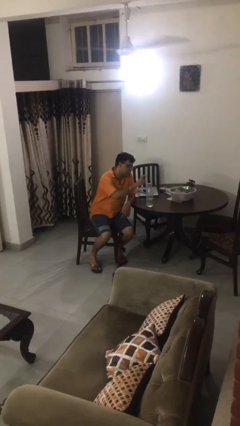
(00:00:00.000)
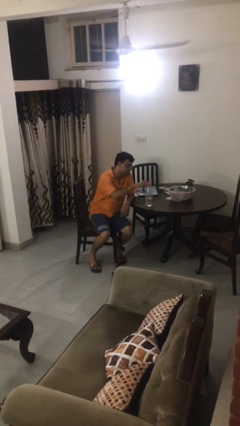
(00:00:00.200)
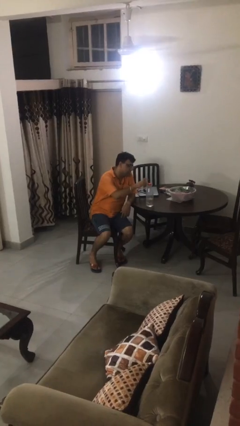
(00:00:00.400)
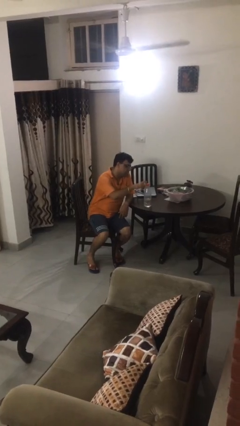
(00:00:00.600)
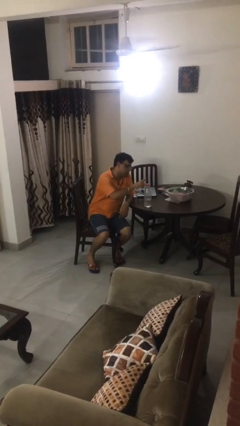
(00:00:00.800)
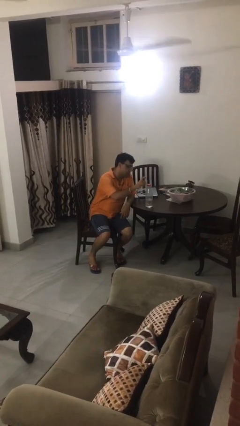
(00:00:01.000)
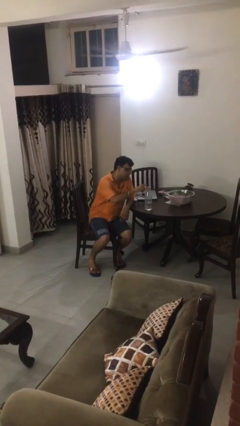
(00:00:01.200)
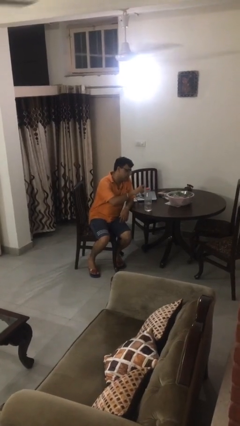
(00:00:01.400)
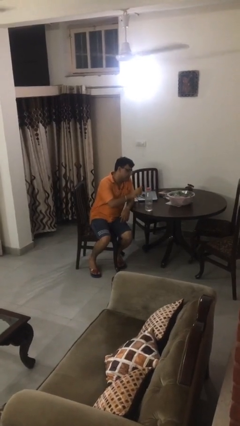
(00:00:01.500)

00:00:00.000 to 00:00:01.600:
person taps object with finger

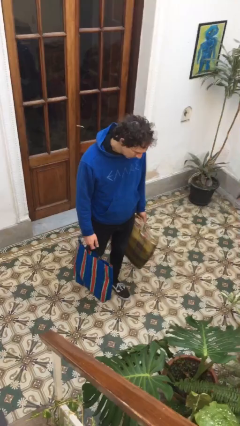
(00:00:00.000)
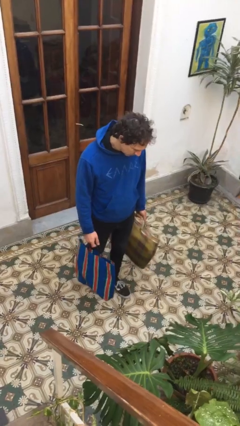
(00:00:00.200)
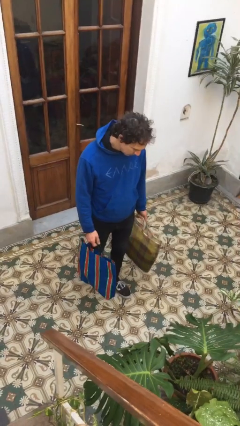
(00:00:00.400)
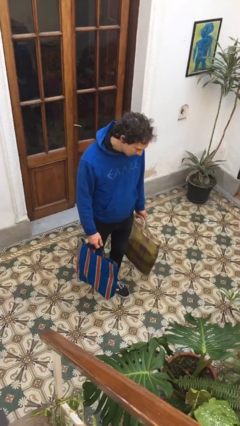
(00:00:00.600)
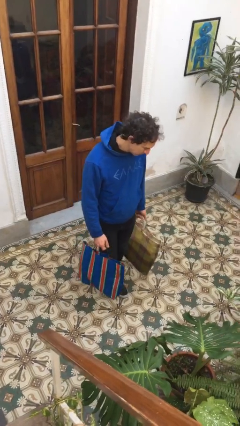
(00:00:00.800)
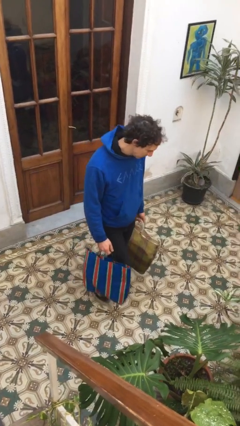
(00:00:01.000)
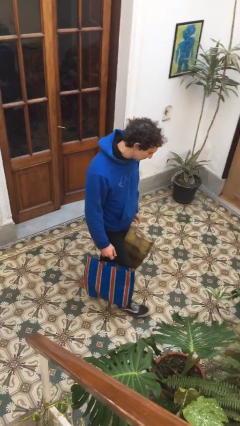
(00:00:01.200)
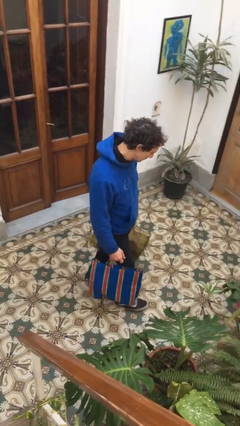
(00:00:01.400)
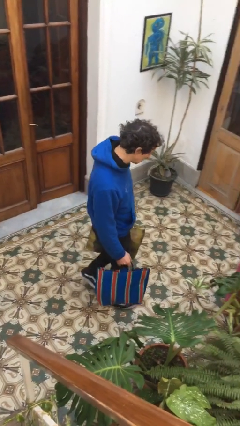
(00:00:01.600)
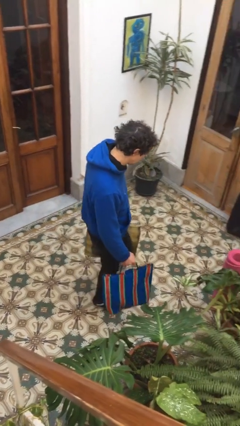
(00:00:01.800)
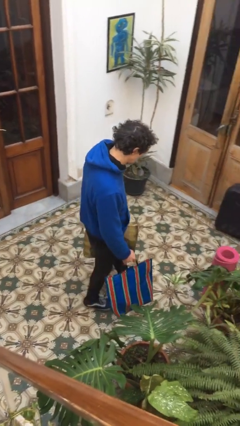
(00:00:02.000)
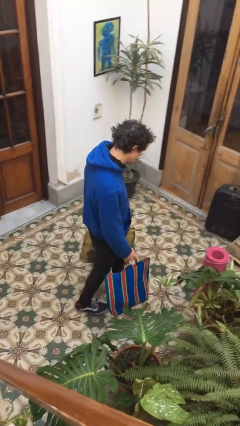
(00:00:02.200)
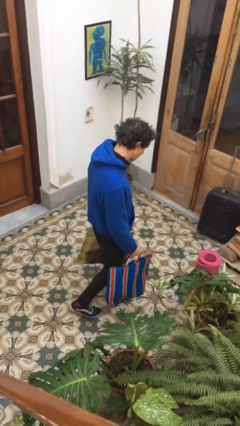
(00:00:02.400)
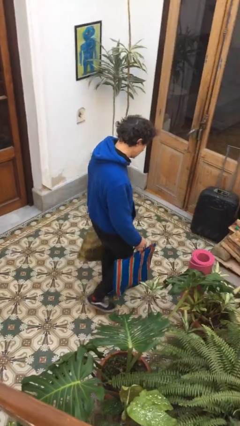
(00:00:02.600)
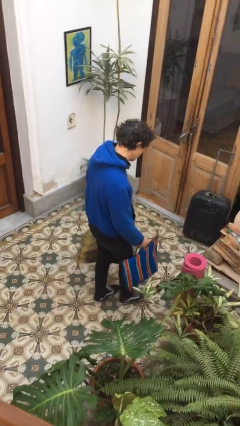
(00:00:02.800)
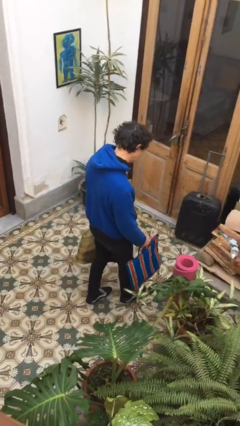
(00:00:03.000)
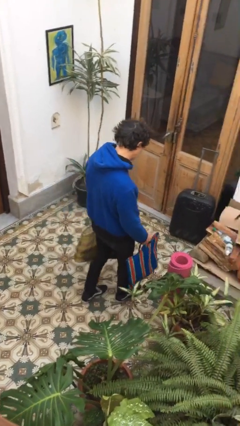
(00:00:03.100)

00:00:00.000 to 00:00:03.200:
person carries groceries

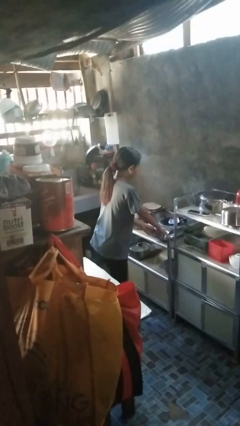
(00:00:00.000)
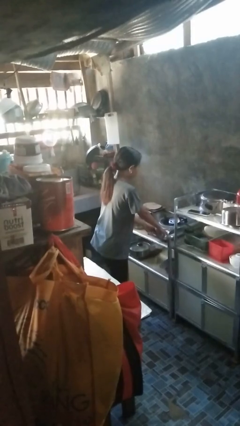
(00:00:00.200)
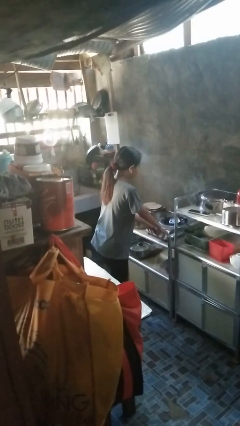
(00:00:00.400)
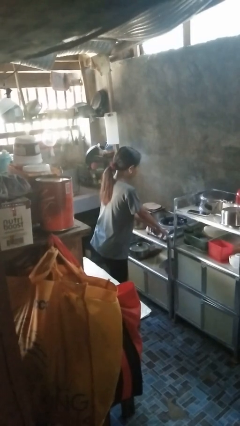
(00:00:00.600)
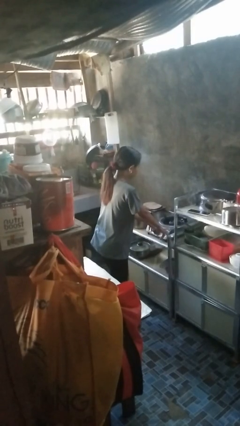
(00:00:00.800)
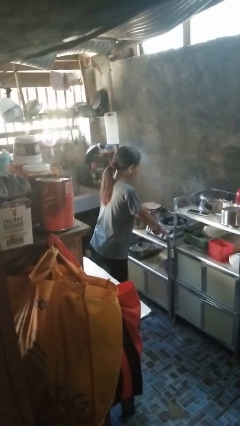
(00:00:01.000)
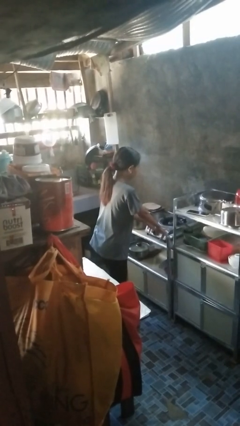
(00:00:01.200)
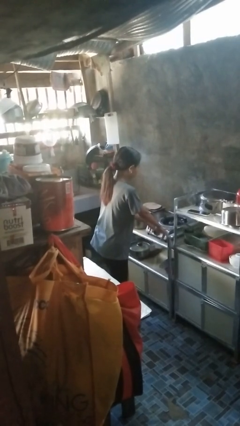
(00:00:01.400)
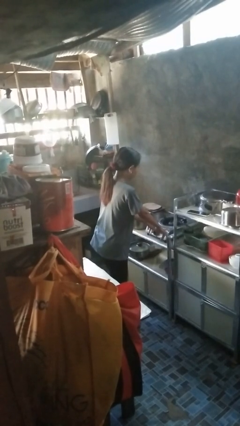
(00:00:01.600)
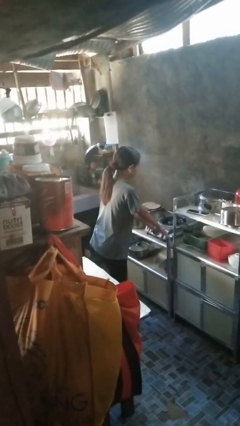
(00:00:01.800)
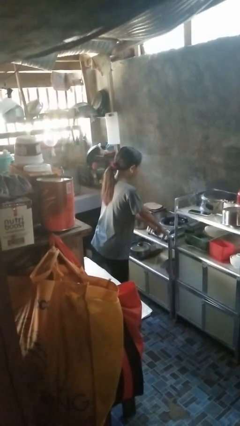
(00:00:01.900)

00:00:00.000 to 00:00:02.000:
person turns off stovetop

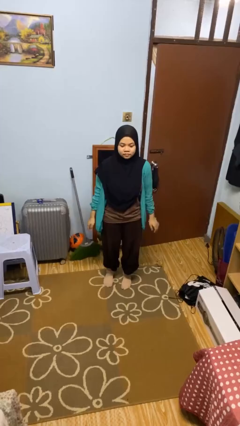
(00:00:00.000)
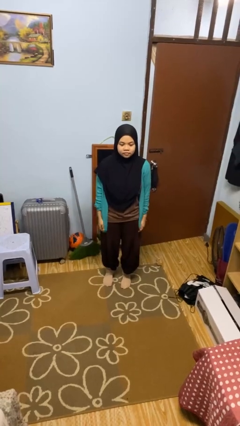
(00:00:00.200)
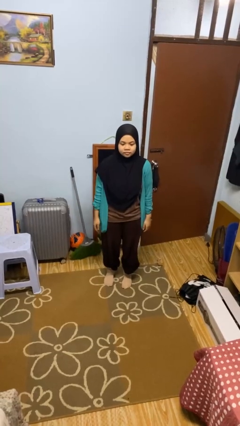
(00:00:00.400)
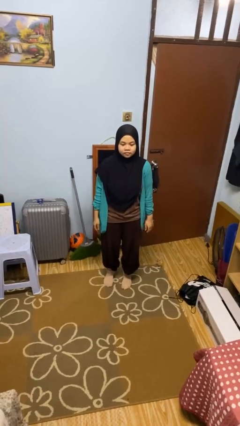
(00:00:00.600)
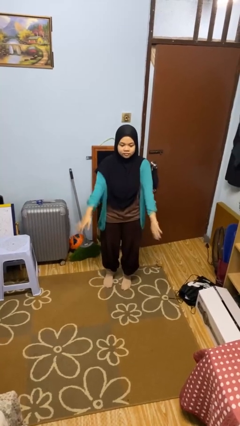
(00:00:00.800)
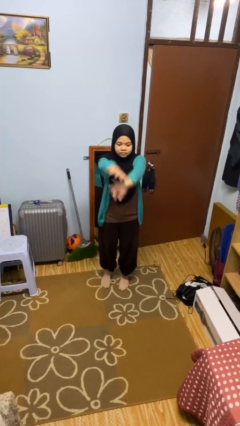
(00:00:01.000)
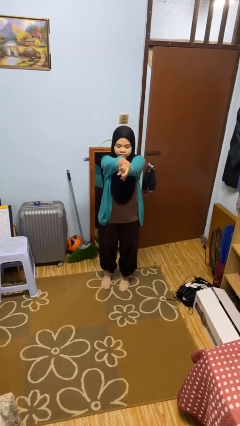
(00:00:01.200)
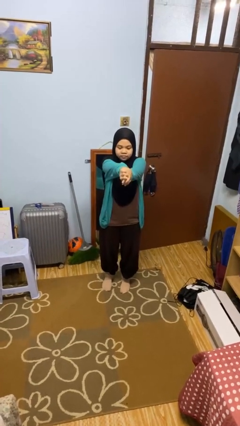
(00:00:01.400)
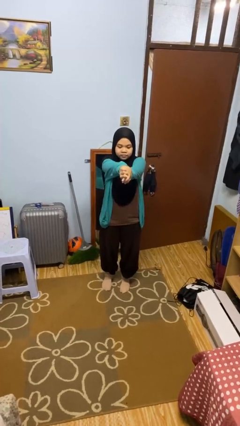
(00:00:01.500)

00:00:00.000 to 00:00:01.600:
person crosses arms

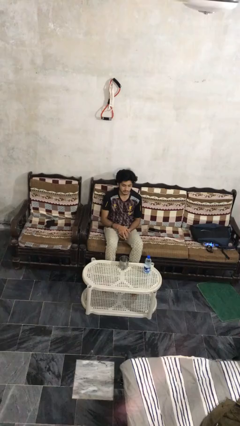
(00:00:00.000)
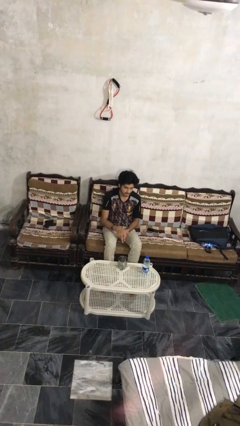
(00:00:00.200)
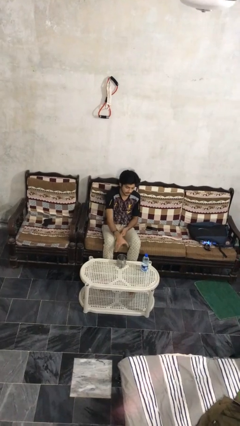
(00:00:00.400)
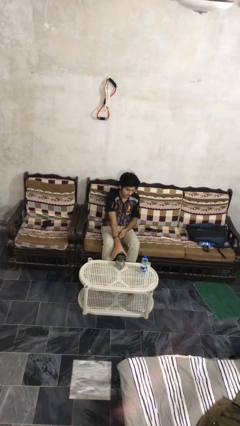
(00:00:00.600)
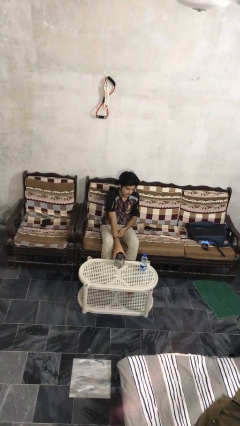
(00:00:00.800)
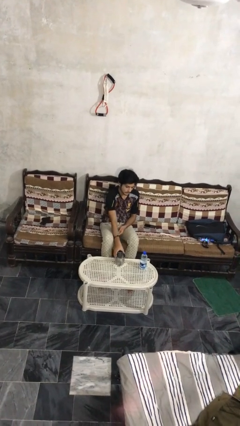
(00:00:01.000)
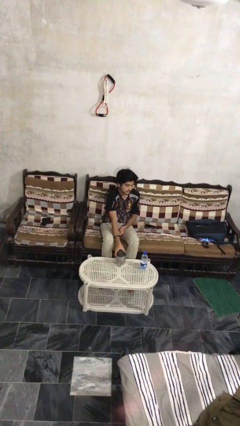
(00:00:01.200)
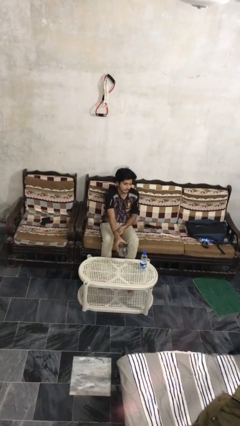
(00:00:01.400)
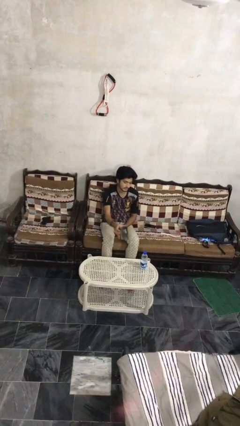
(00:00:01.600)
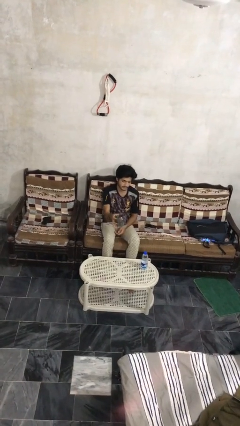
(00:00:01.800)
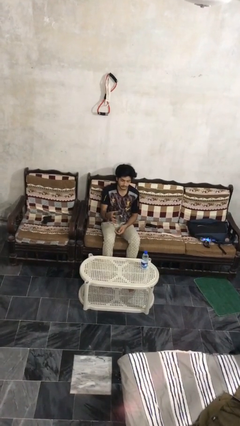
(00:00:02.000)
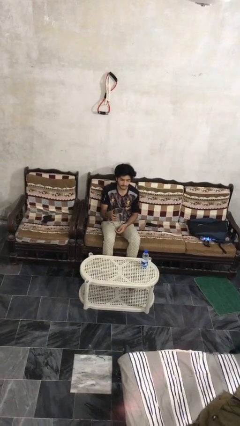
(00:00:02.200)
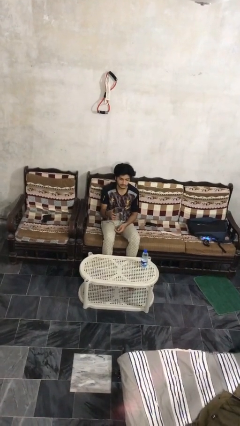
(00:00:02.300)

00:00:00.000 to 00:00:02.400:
person picks up object from table

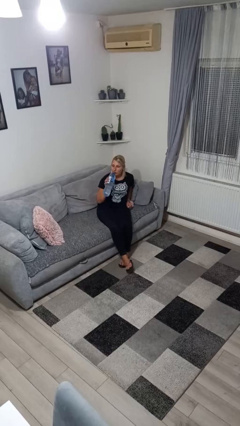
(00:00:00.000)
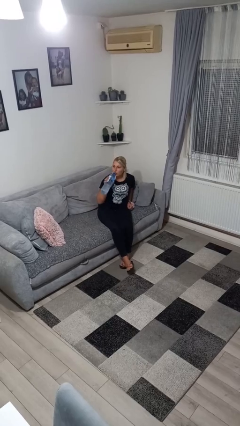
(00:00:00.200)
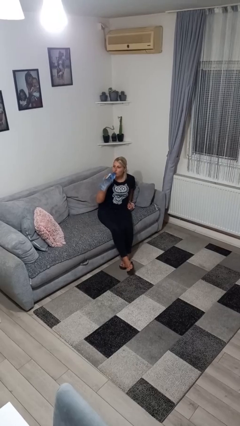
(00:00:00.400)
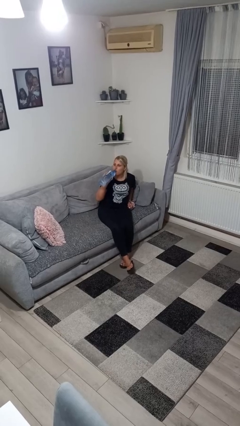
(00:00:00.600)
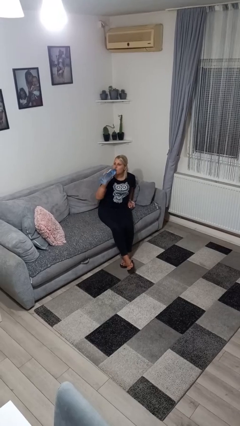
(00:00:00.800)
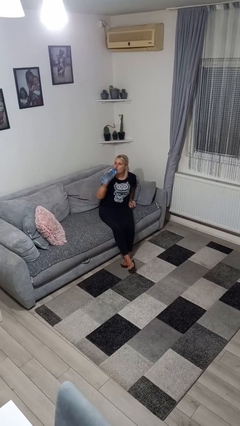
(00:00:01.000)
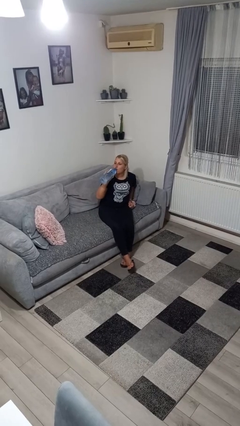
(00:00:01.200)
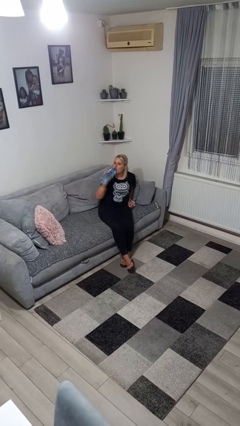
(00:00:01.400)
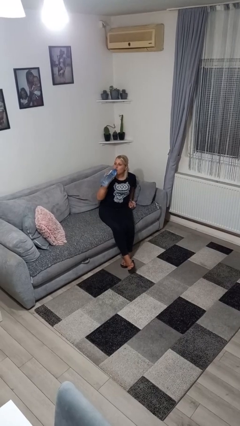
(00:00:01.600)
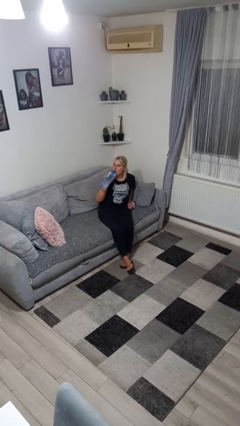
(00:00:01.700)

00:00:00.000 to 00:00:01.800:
person drinks from bottle

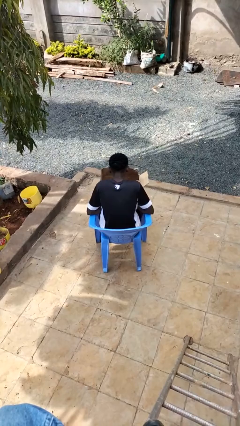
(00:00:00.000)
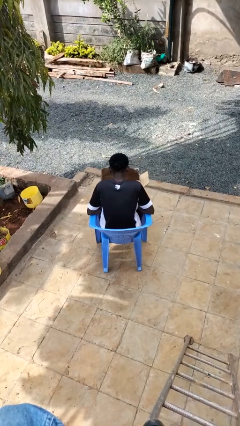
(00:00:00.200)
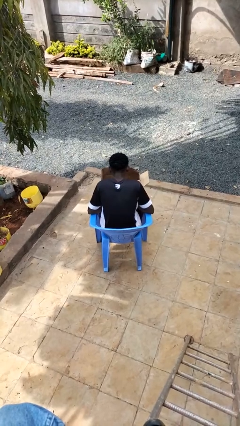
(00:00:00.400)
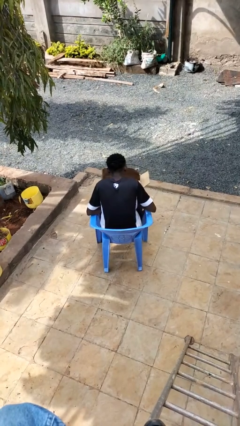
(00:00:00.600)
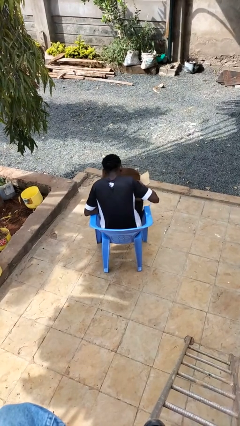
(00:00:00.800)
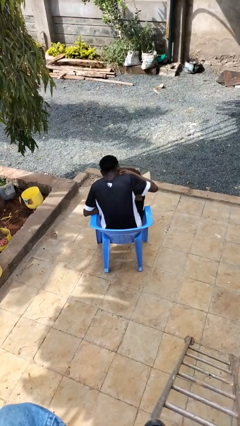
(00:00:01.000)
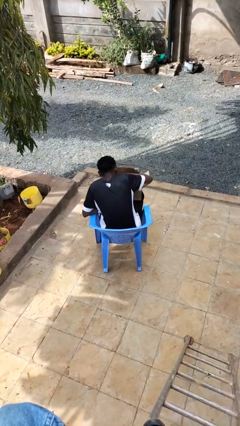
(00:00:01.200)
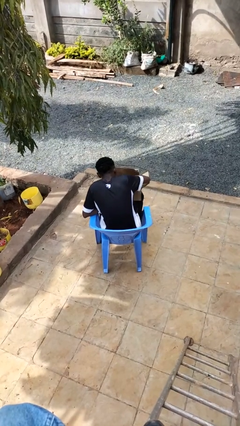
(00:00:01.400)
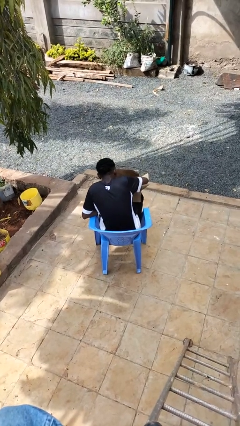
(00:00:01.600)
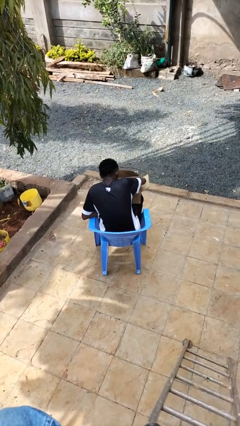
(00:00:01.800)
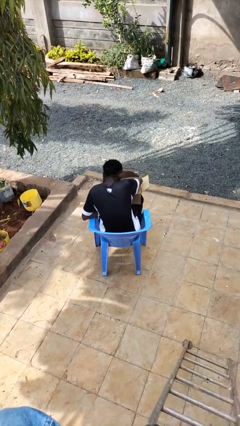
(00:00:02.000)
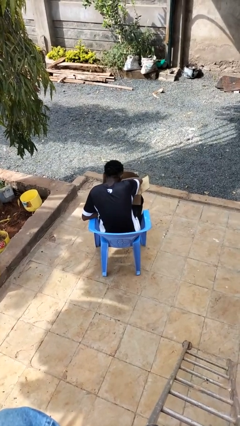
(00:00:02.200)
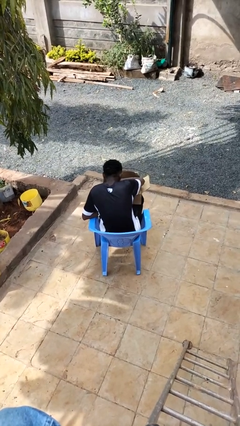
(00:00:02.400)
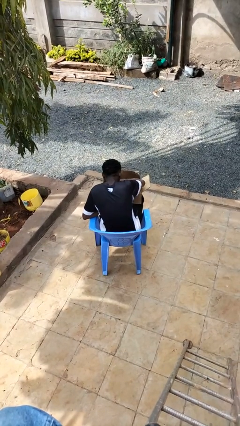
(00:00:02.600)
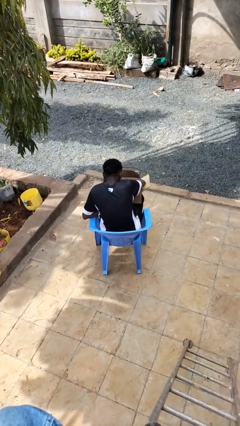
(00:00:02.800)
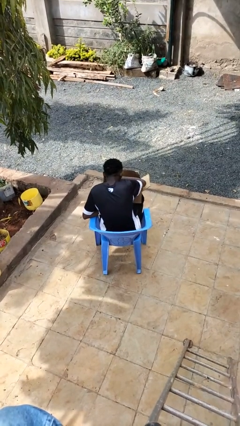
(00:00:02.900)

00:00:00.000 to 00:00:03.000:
person searches in box

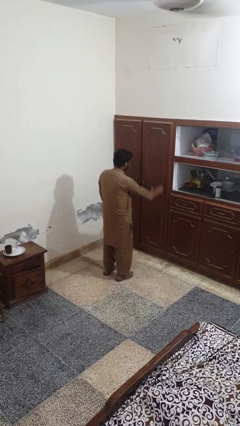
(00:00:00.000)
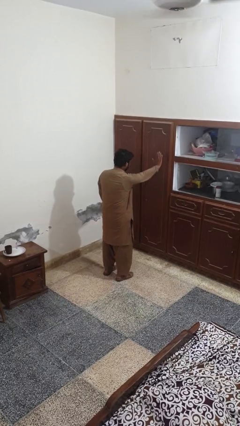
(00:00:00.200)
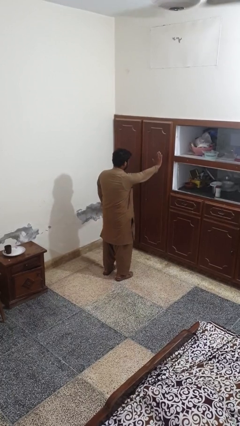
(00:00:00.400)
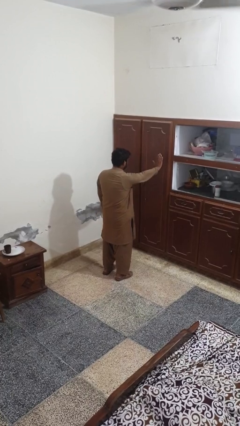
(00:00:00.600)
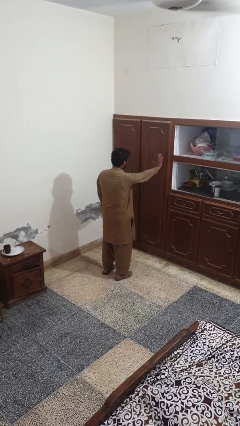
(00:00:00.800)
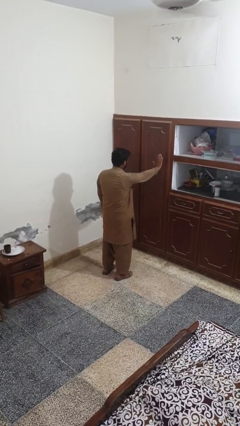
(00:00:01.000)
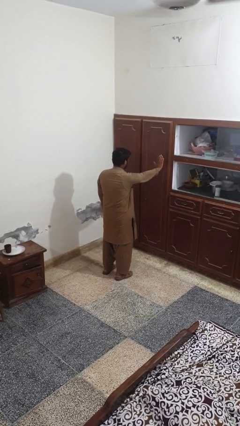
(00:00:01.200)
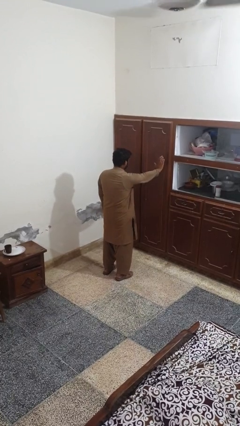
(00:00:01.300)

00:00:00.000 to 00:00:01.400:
person gestures stop
